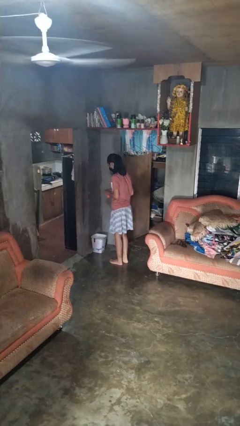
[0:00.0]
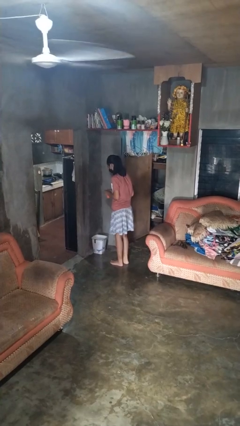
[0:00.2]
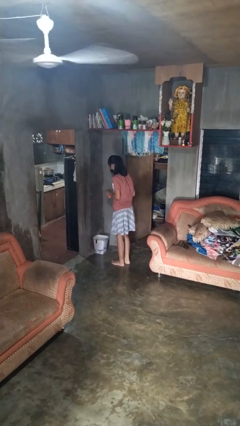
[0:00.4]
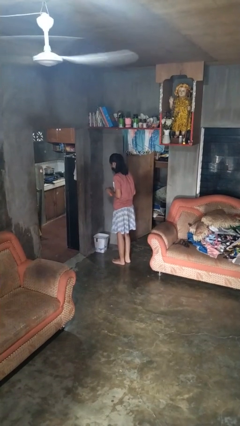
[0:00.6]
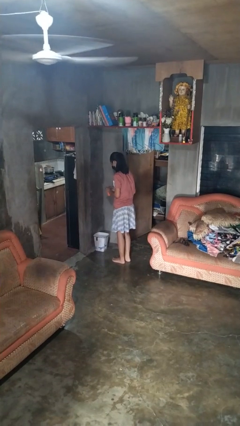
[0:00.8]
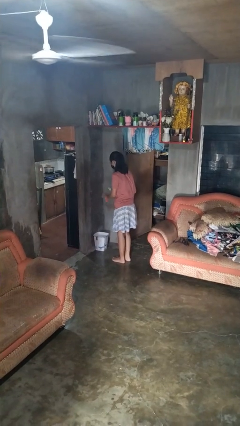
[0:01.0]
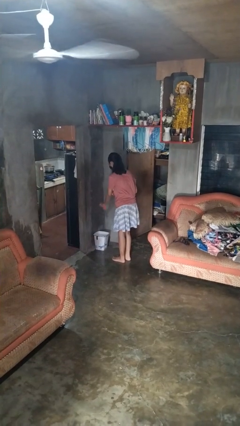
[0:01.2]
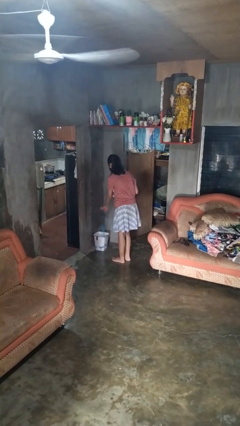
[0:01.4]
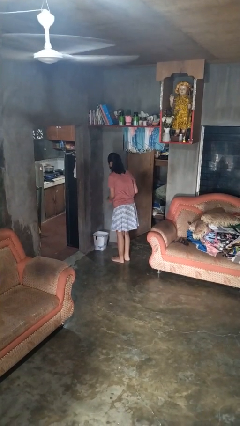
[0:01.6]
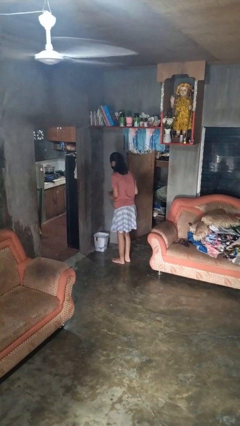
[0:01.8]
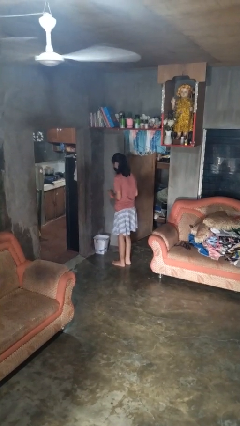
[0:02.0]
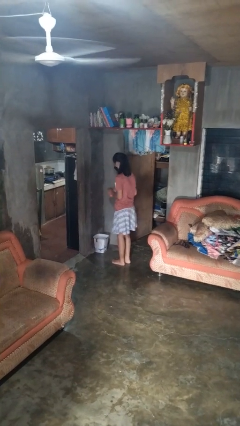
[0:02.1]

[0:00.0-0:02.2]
person discards trash

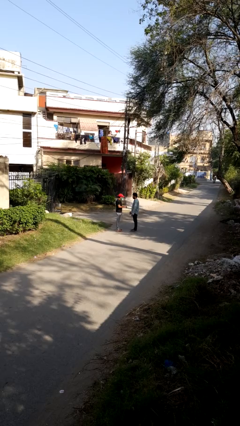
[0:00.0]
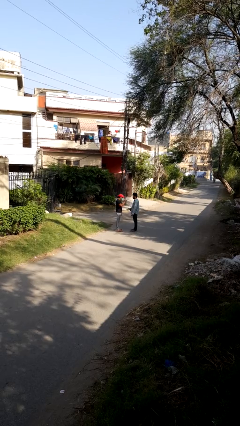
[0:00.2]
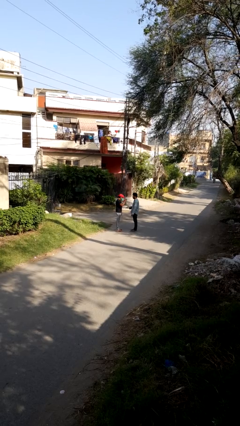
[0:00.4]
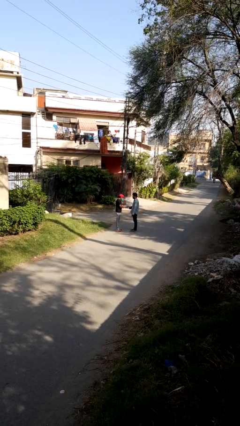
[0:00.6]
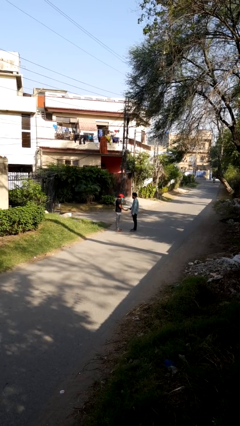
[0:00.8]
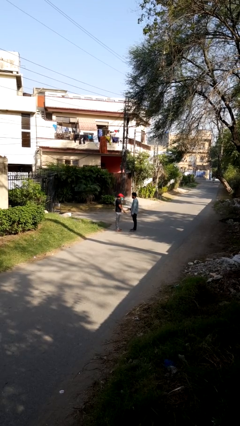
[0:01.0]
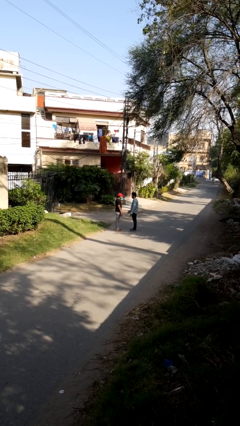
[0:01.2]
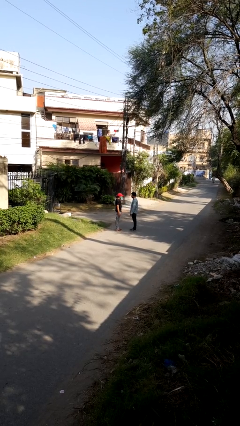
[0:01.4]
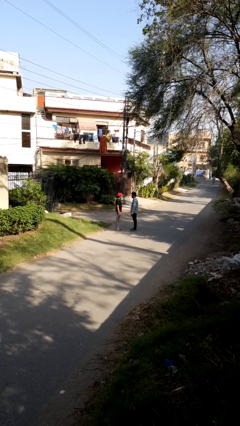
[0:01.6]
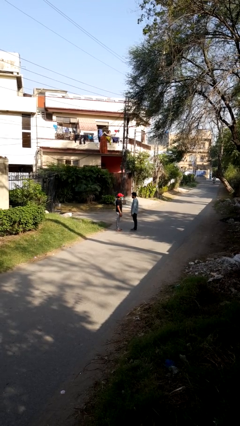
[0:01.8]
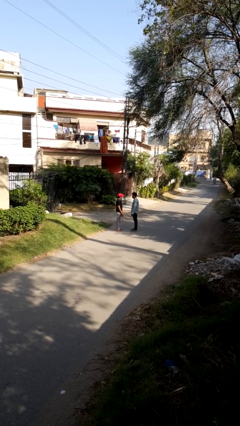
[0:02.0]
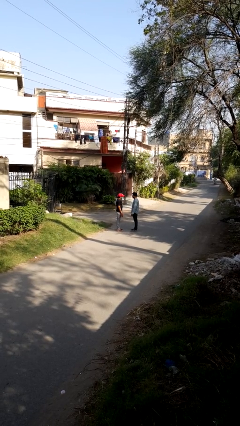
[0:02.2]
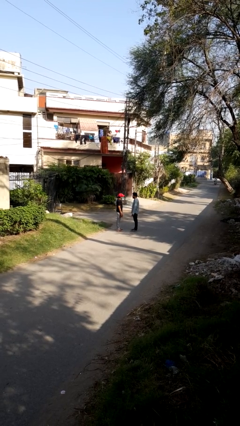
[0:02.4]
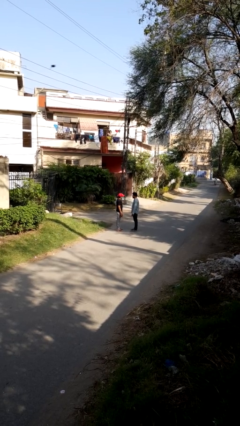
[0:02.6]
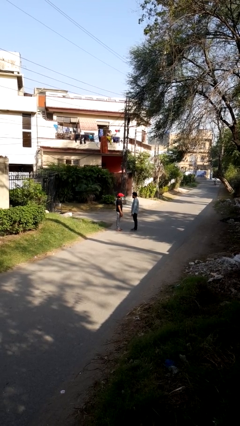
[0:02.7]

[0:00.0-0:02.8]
person highfives hand

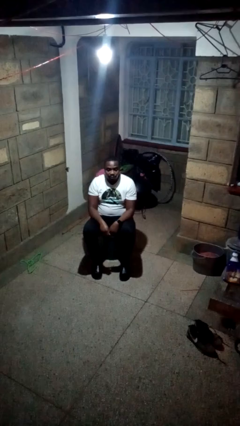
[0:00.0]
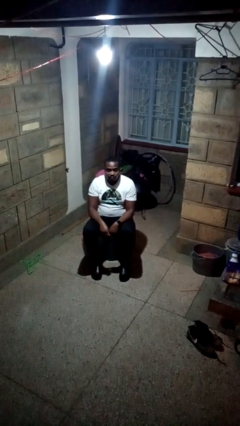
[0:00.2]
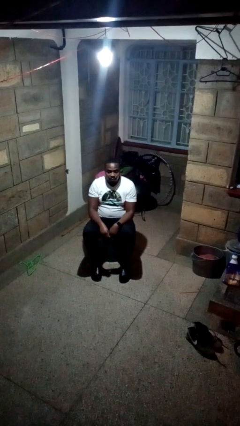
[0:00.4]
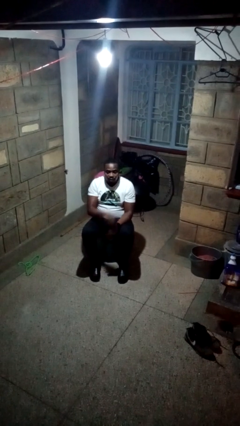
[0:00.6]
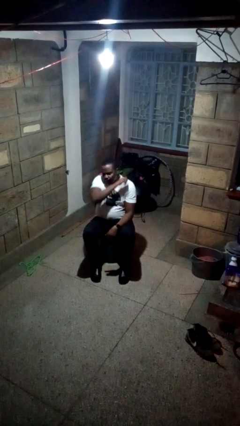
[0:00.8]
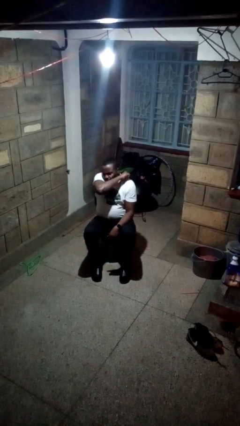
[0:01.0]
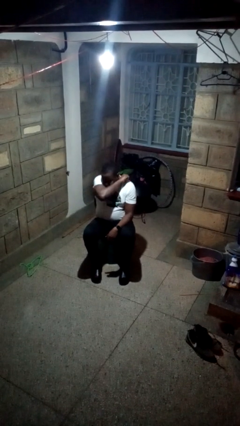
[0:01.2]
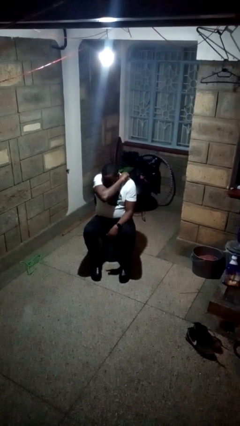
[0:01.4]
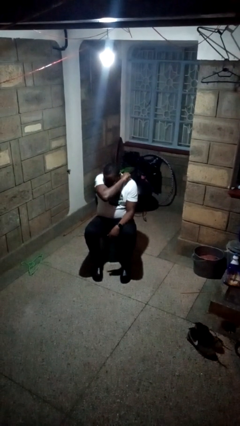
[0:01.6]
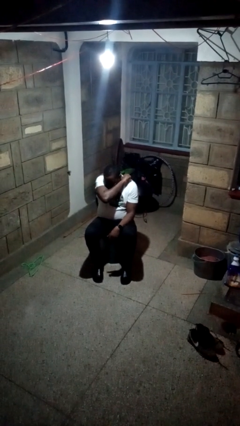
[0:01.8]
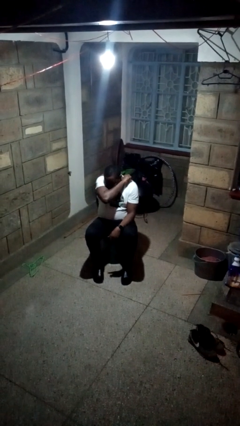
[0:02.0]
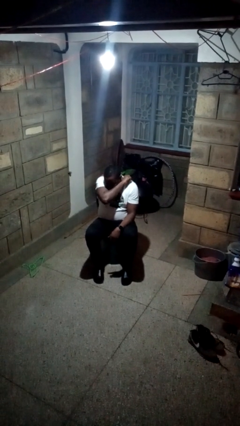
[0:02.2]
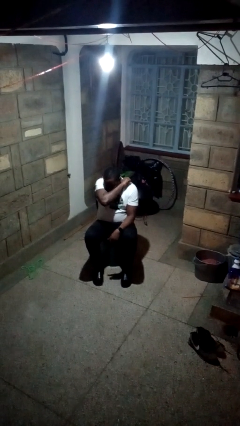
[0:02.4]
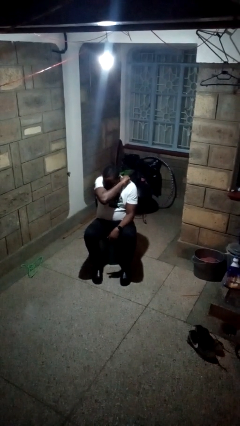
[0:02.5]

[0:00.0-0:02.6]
person sneezes into arm

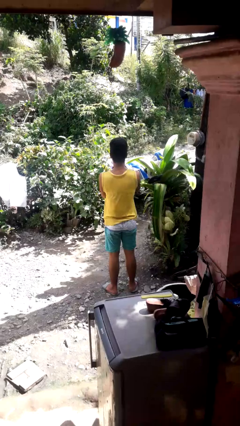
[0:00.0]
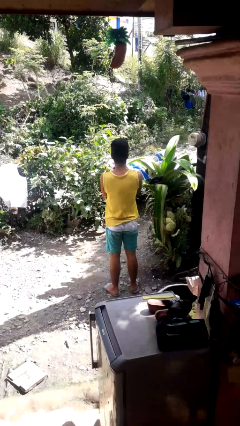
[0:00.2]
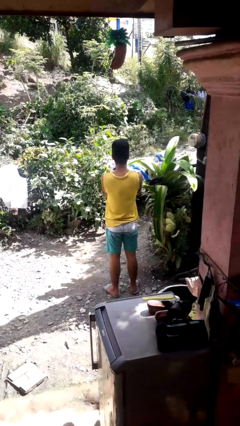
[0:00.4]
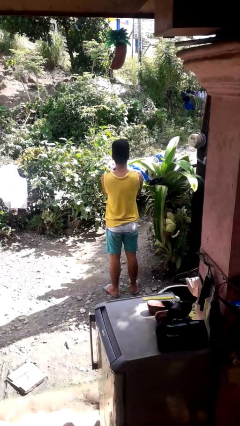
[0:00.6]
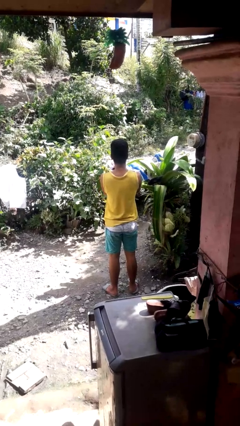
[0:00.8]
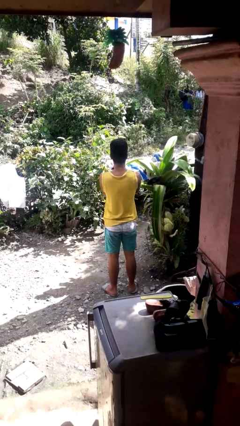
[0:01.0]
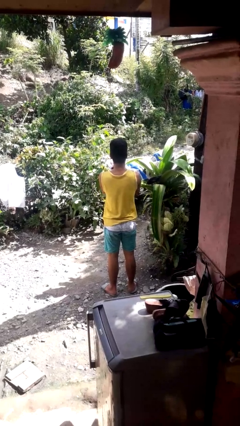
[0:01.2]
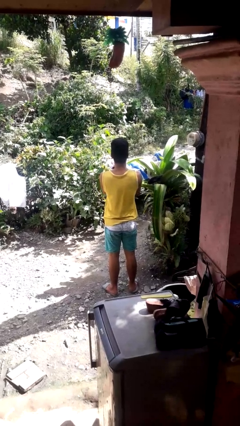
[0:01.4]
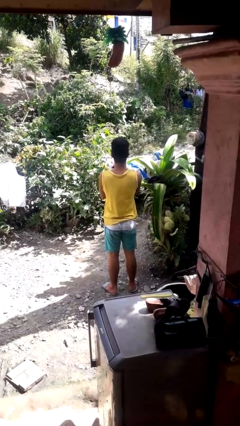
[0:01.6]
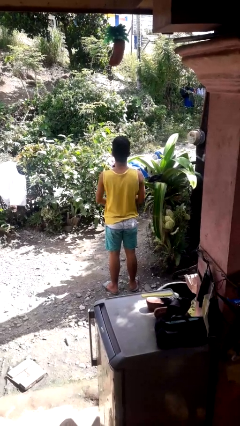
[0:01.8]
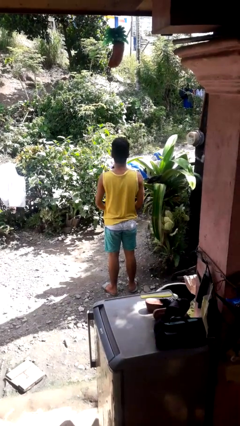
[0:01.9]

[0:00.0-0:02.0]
person blows into hands

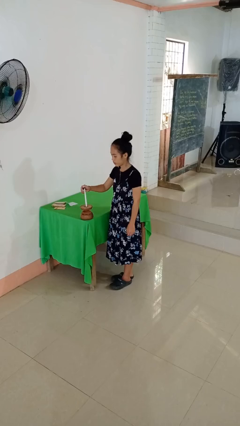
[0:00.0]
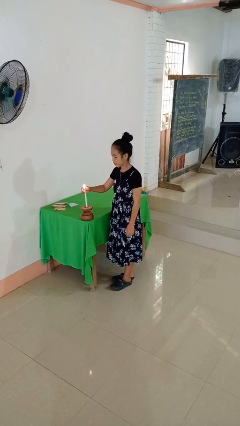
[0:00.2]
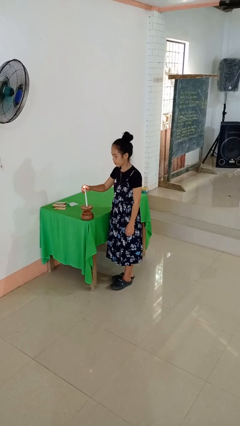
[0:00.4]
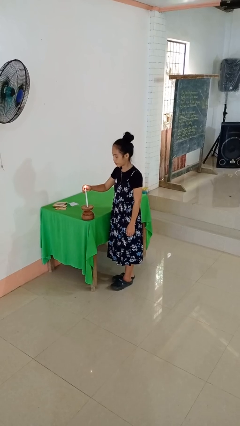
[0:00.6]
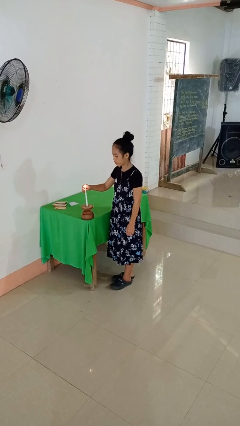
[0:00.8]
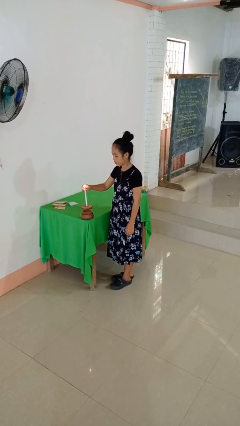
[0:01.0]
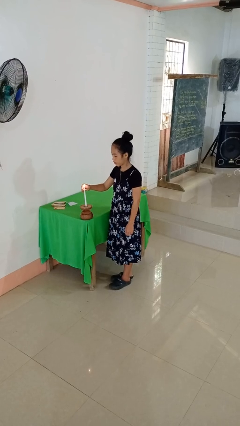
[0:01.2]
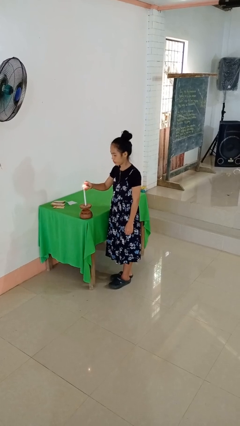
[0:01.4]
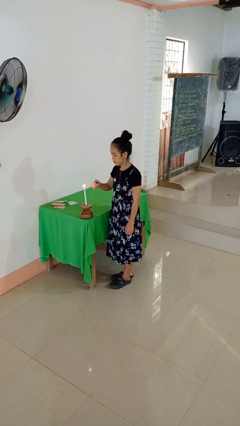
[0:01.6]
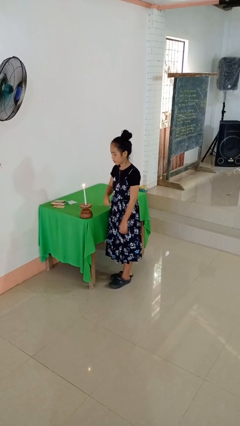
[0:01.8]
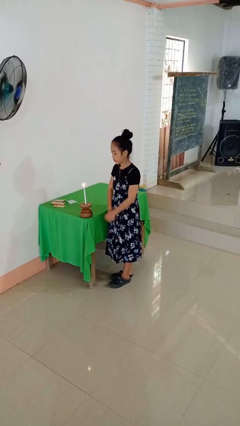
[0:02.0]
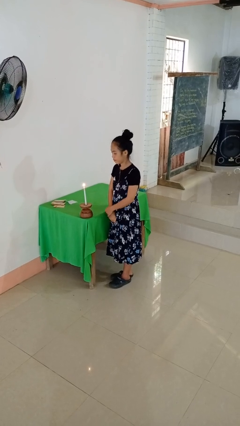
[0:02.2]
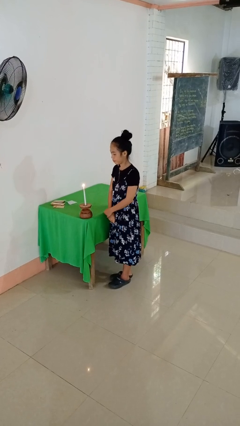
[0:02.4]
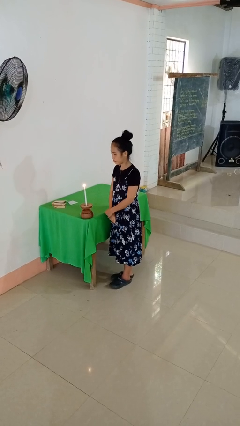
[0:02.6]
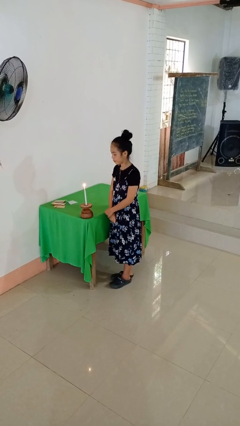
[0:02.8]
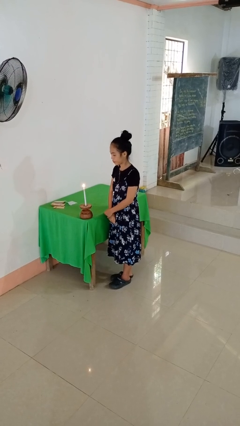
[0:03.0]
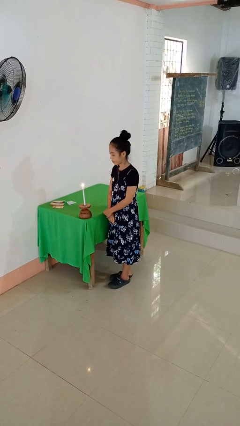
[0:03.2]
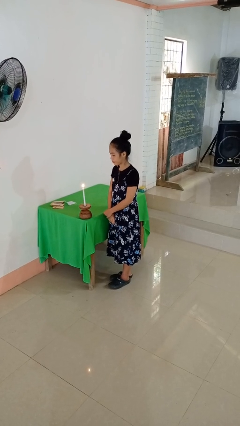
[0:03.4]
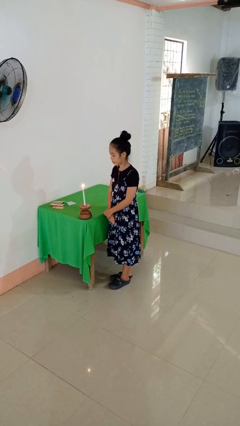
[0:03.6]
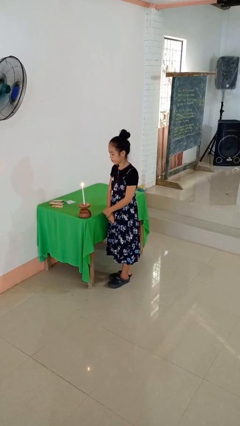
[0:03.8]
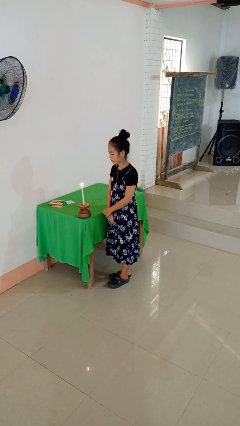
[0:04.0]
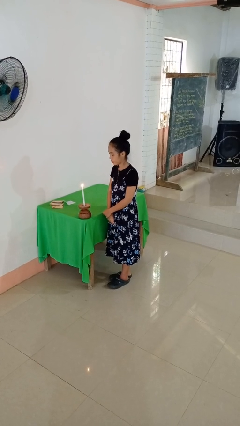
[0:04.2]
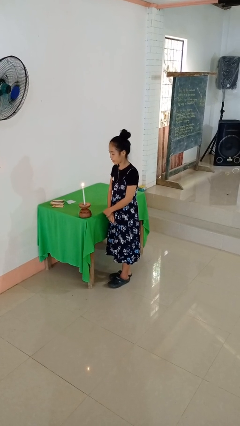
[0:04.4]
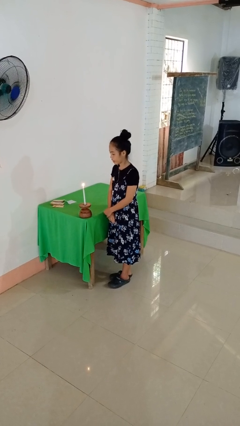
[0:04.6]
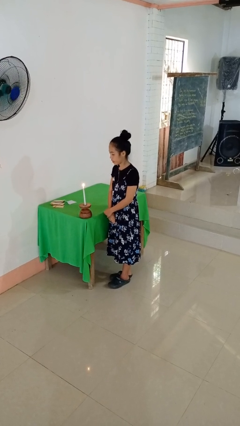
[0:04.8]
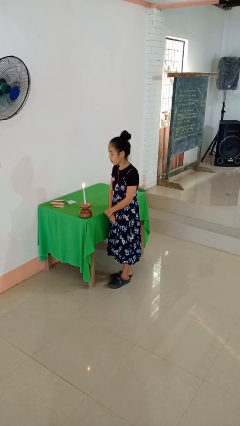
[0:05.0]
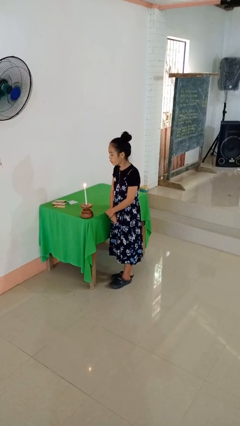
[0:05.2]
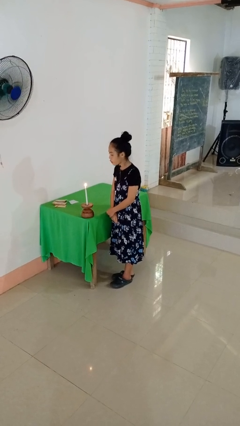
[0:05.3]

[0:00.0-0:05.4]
person lights candle

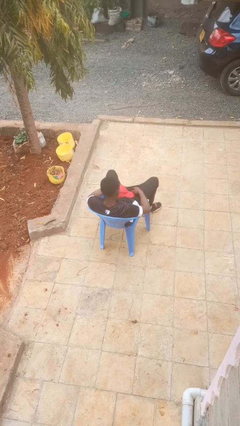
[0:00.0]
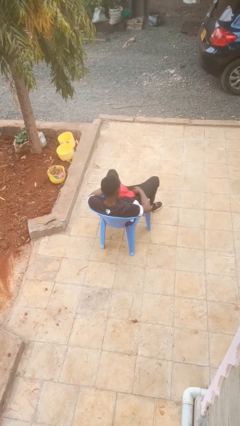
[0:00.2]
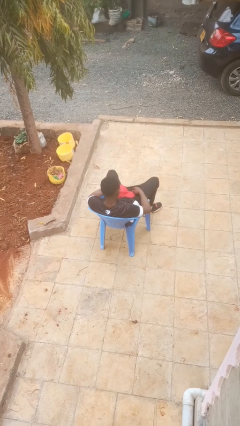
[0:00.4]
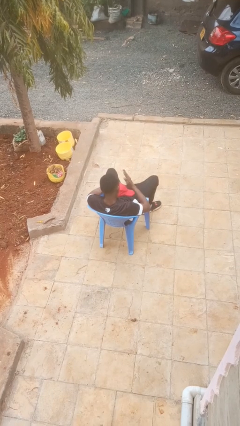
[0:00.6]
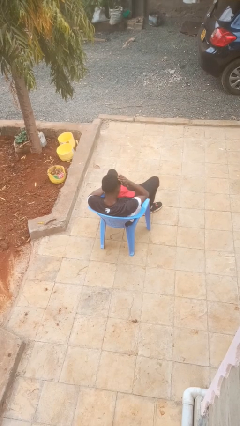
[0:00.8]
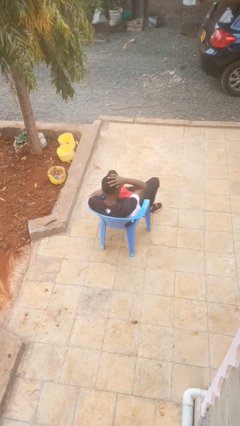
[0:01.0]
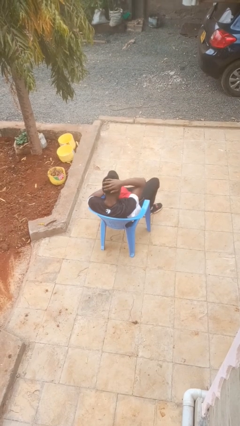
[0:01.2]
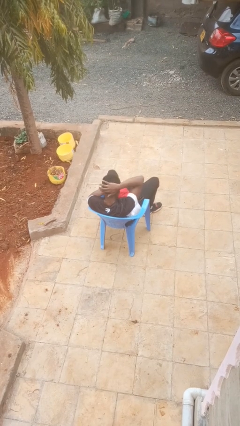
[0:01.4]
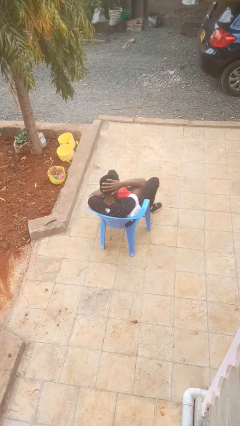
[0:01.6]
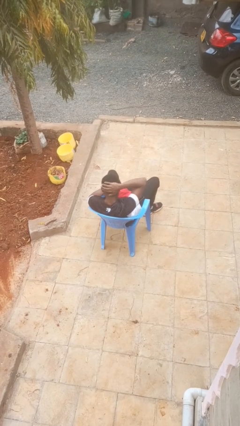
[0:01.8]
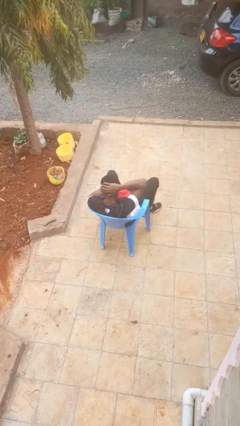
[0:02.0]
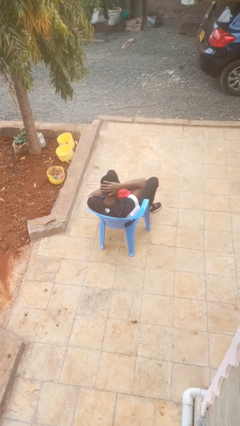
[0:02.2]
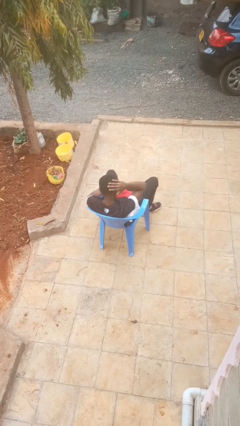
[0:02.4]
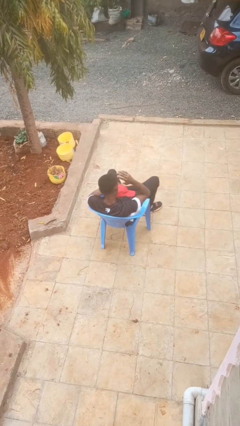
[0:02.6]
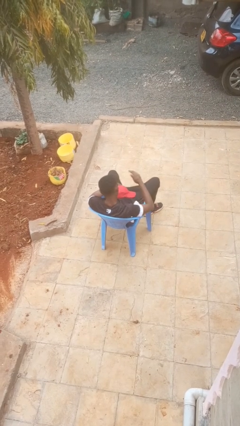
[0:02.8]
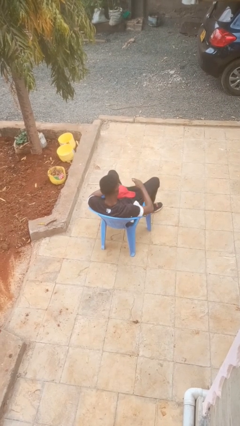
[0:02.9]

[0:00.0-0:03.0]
person strokes hair
